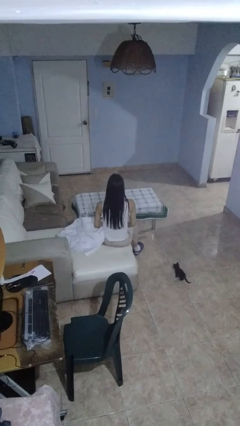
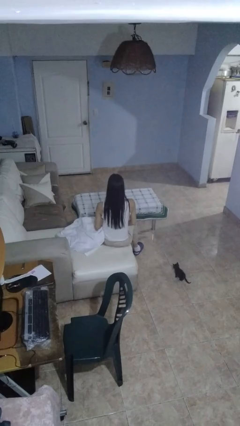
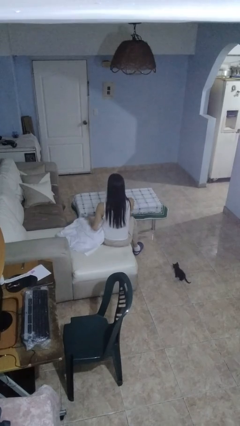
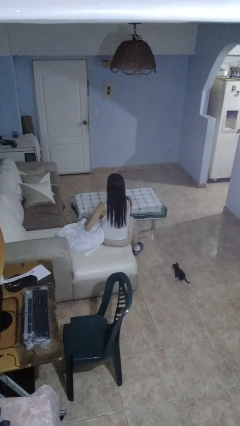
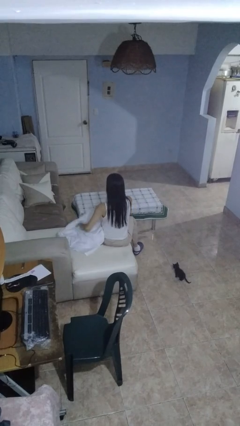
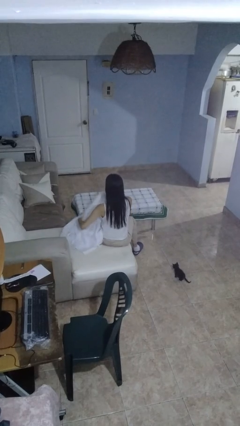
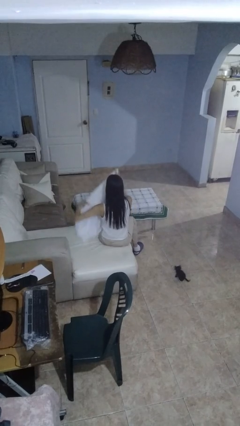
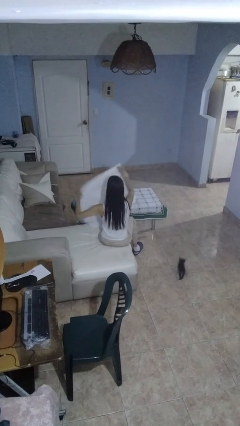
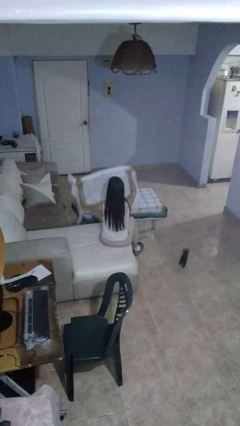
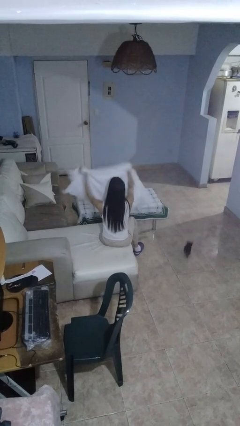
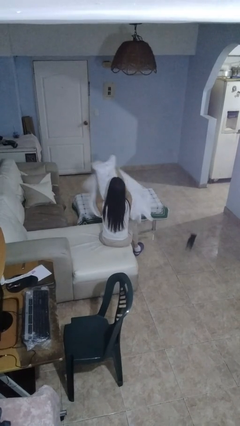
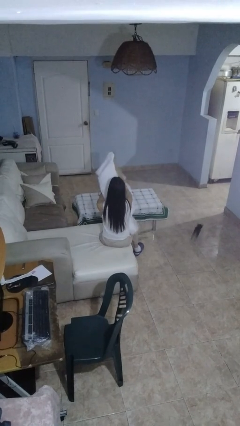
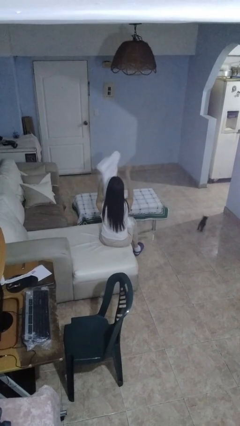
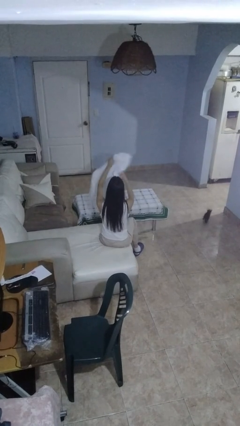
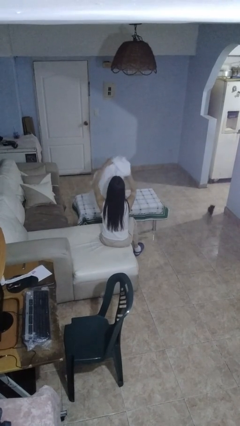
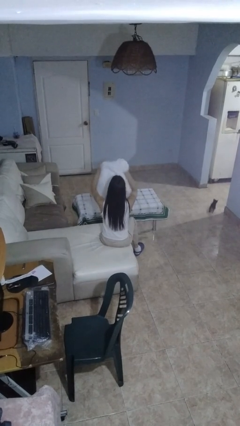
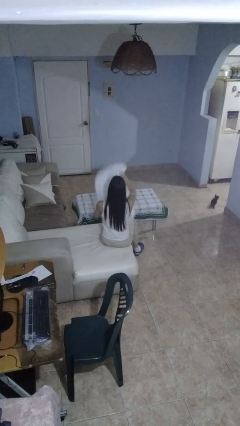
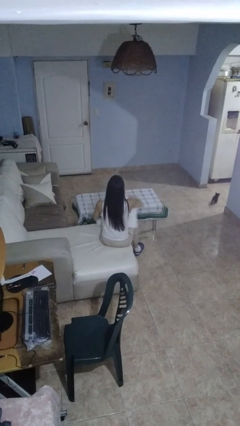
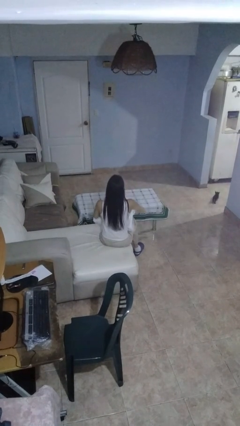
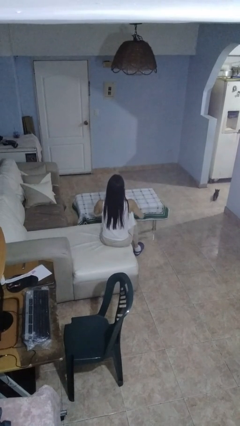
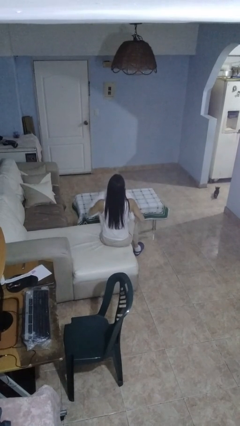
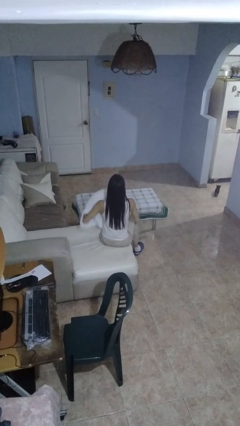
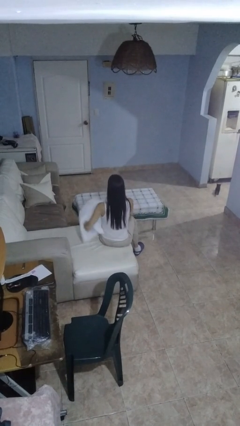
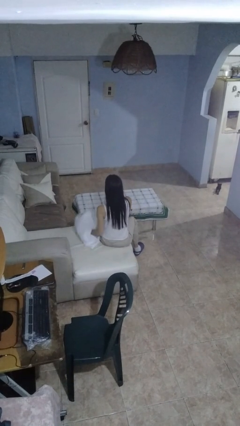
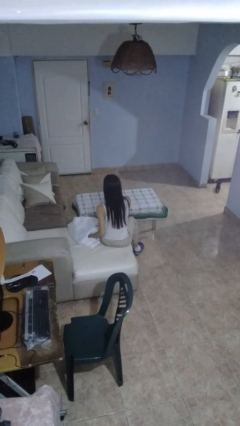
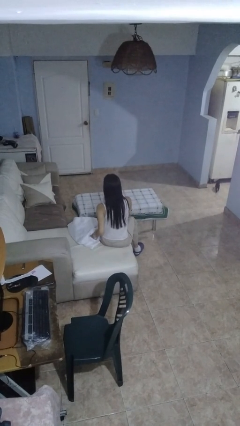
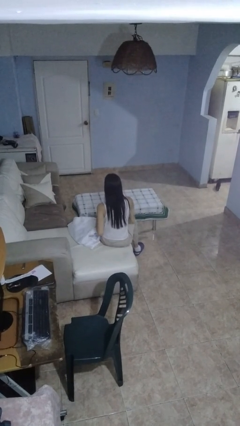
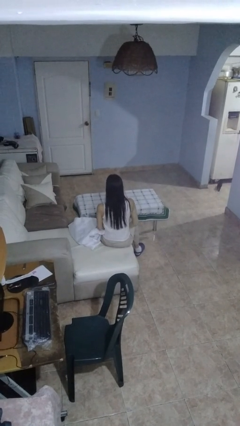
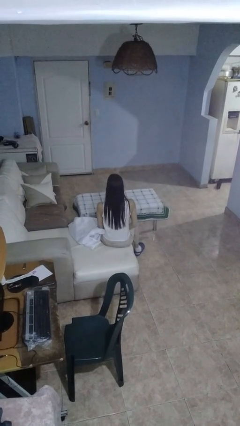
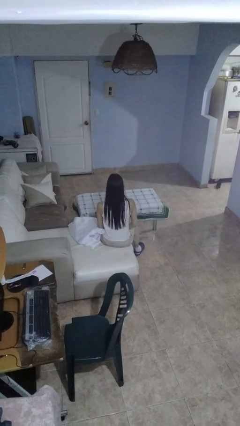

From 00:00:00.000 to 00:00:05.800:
person folds blanket

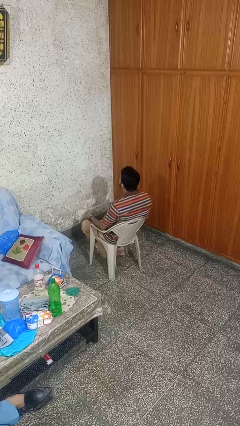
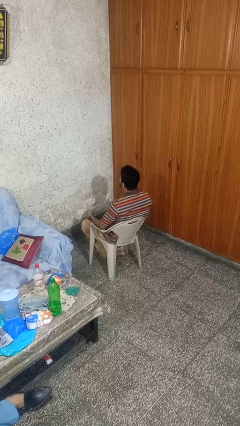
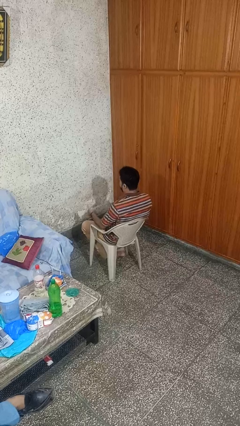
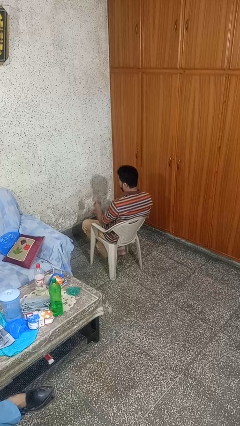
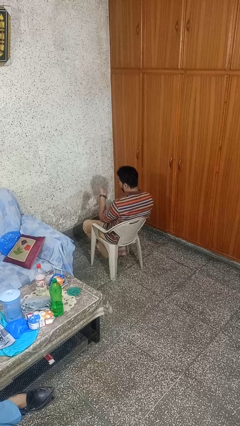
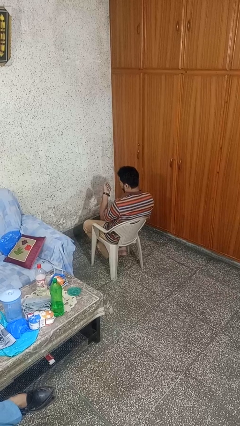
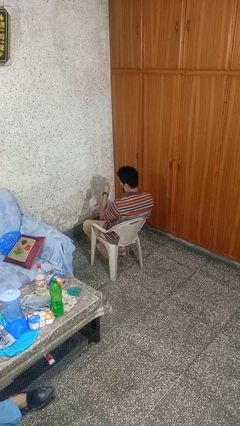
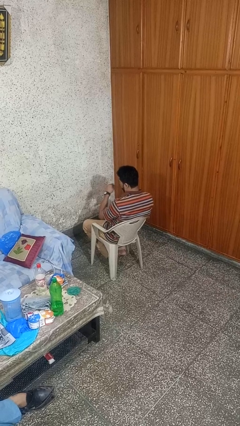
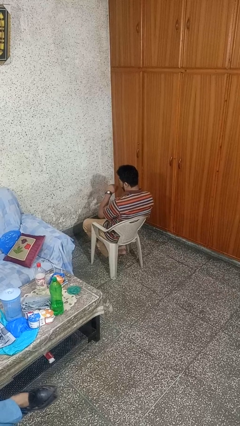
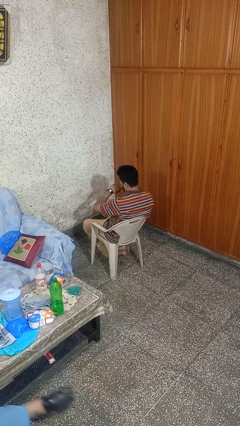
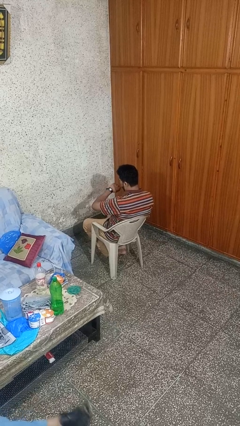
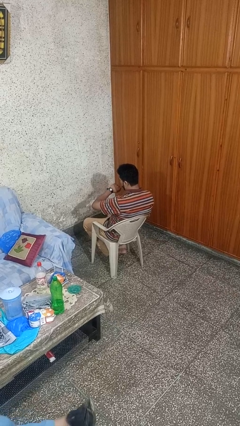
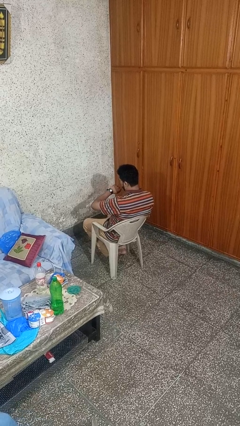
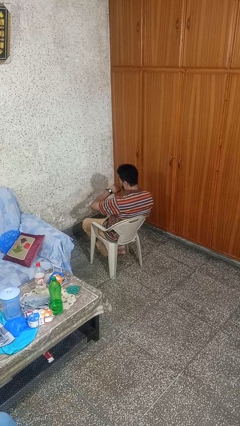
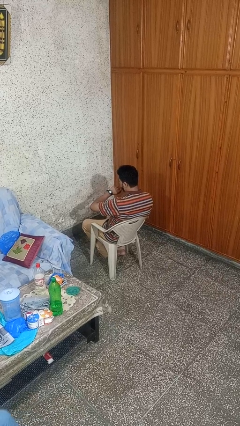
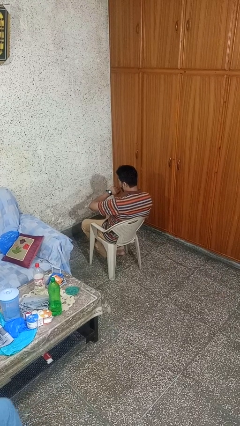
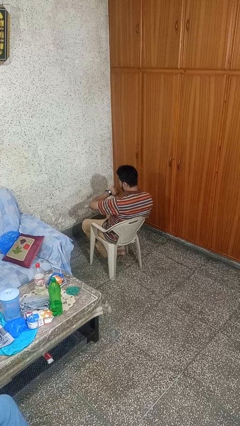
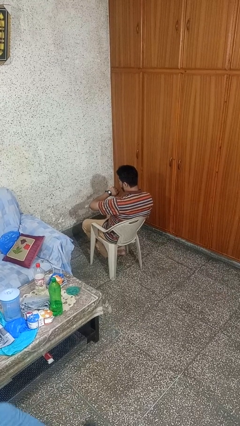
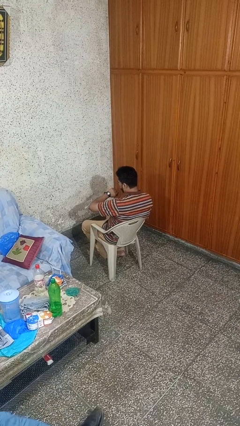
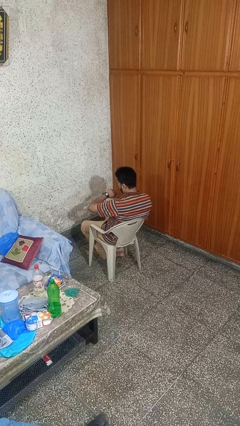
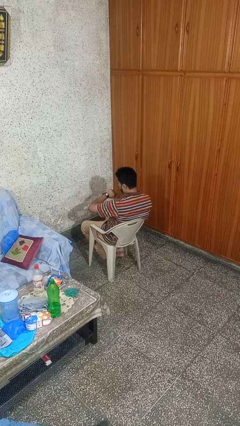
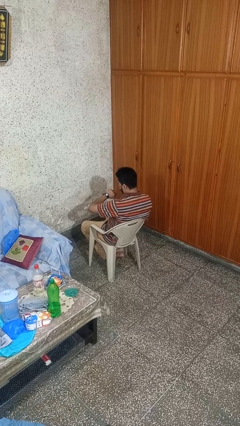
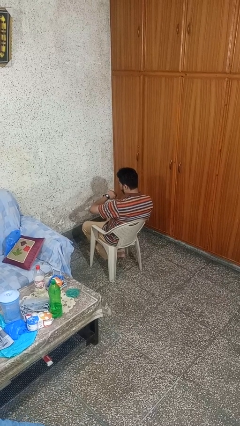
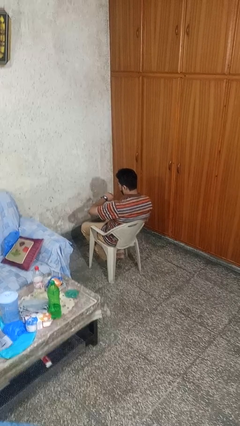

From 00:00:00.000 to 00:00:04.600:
person looks at wristwatch

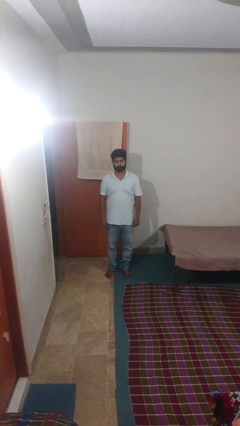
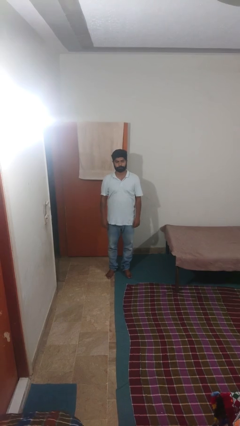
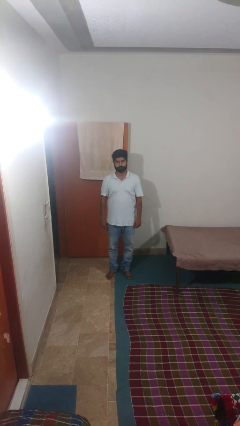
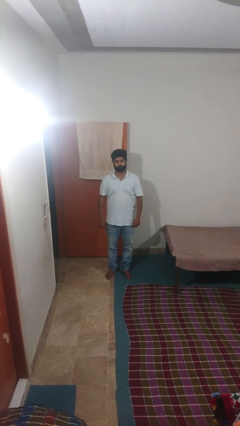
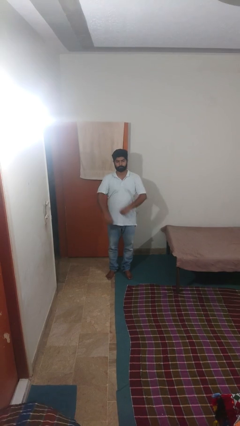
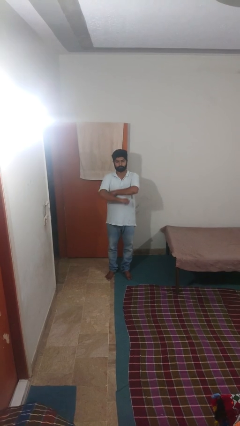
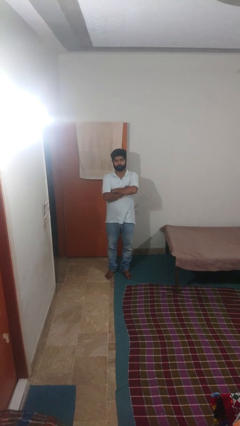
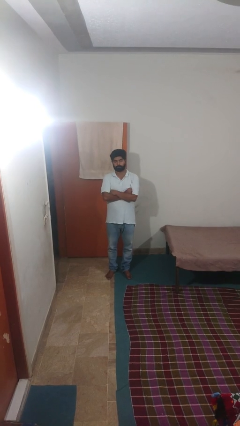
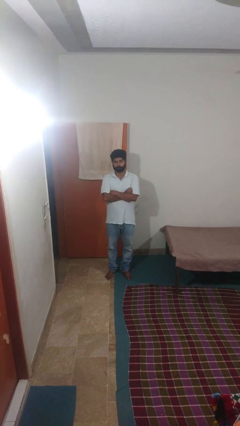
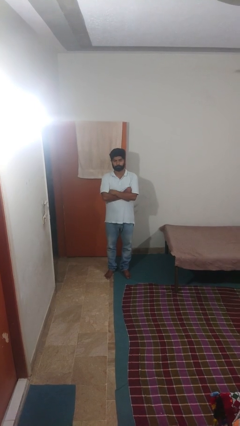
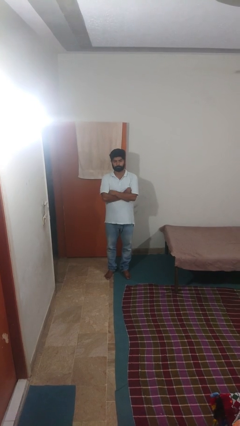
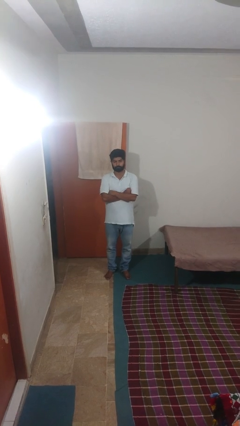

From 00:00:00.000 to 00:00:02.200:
person crosses arms

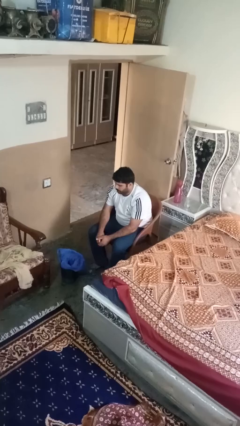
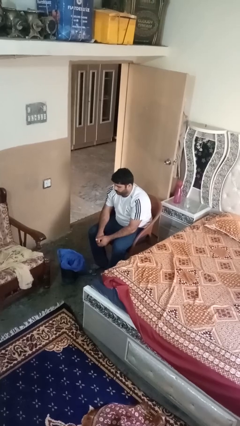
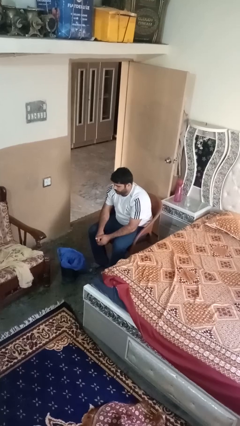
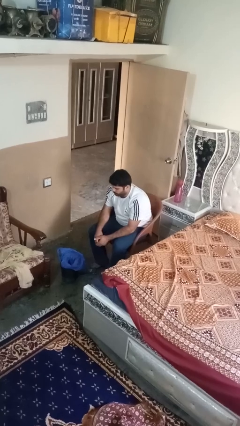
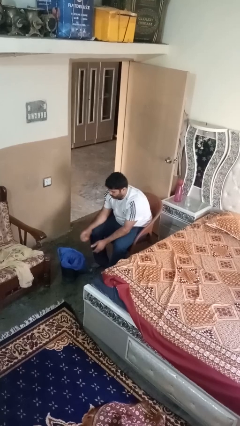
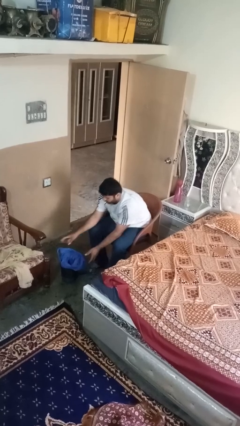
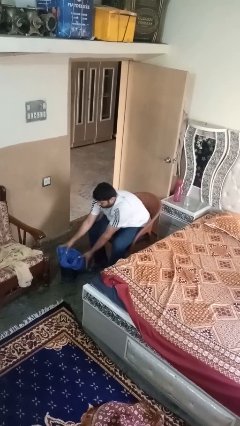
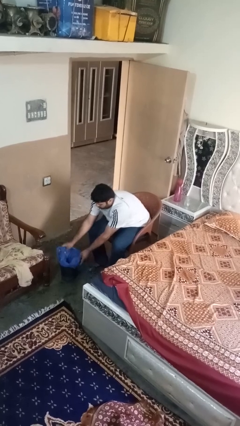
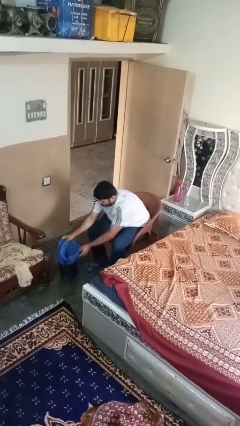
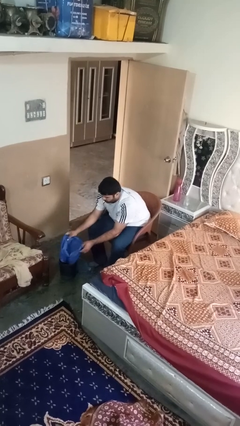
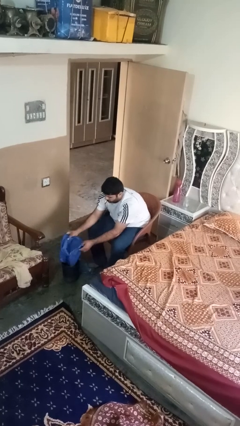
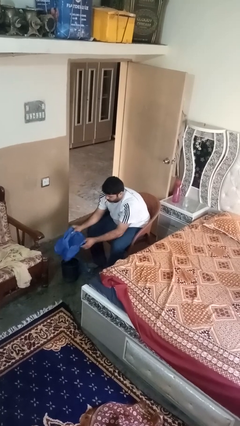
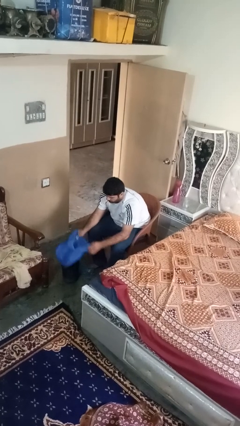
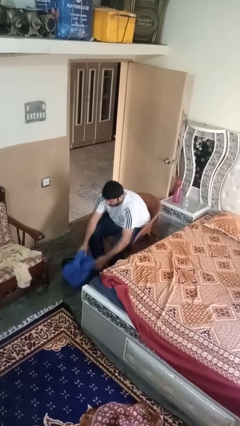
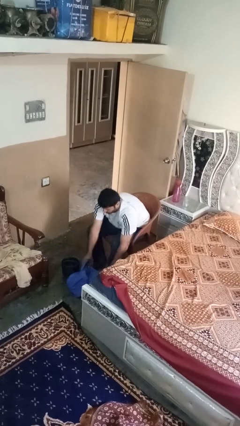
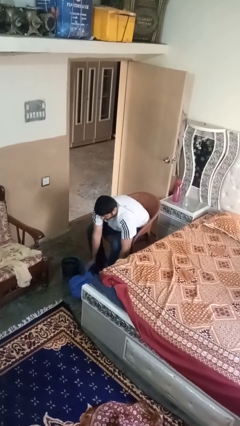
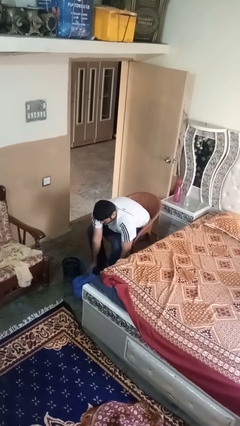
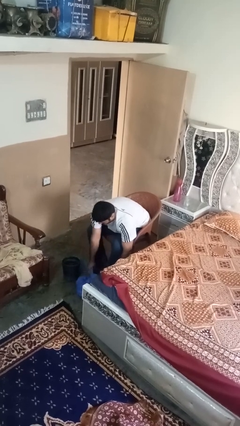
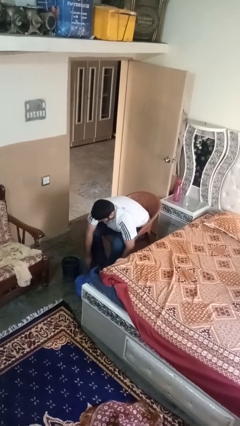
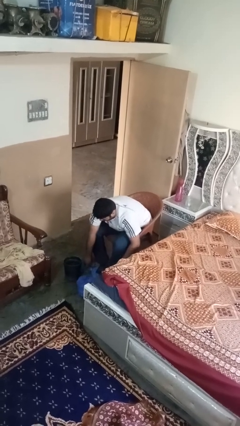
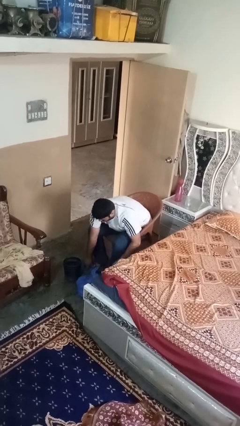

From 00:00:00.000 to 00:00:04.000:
person removes trashbag from trashcan

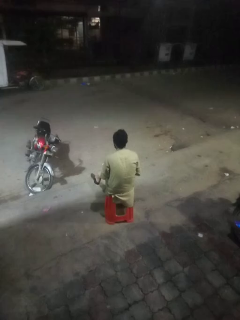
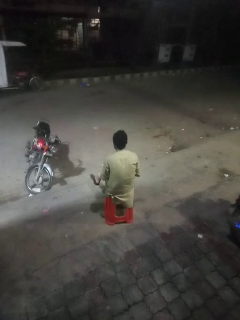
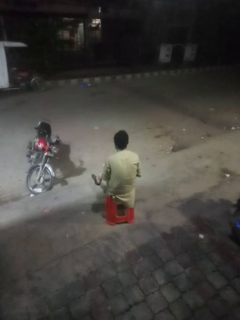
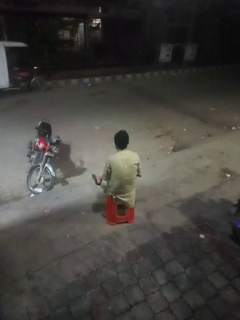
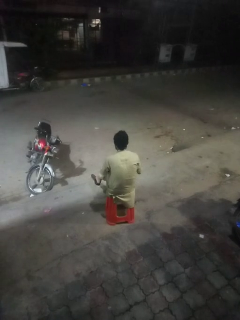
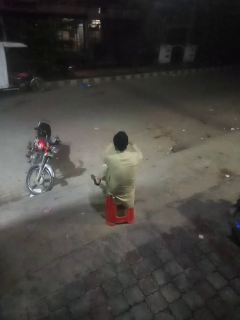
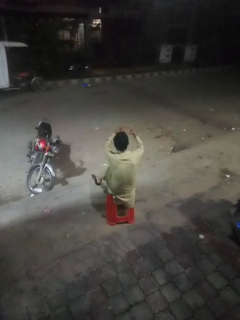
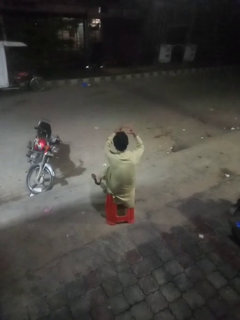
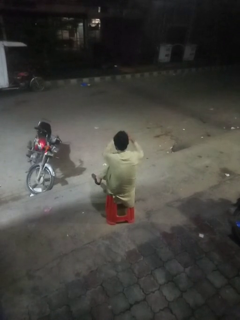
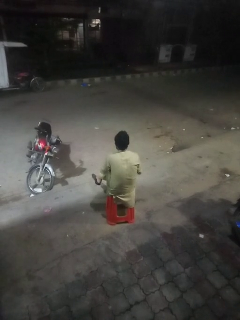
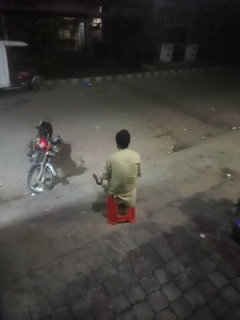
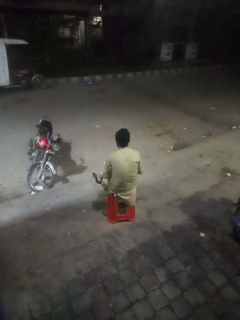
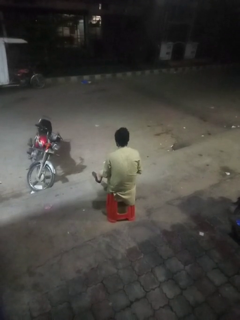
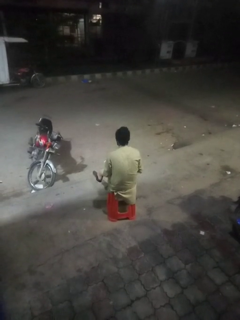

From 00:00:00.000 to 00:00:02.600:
person gestures heart
